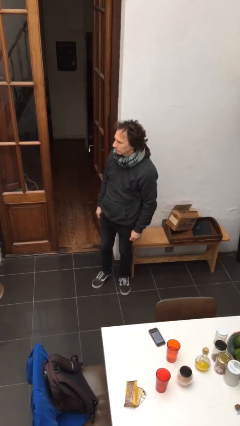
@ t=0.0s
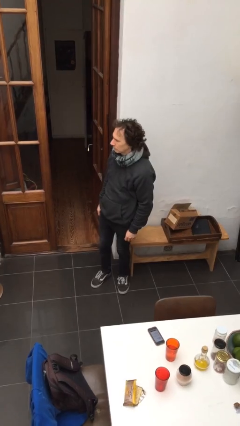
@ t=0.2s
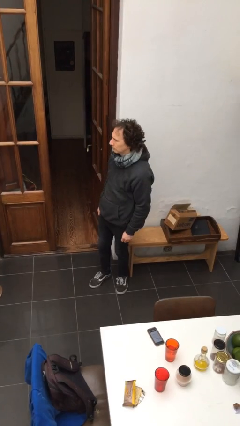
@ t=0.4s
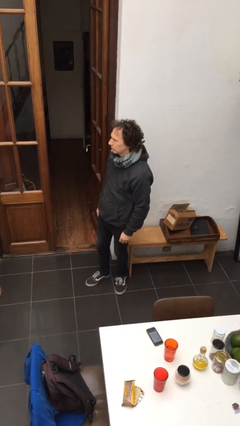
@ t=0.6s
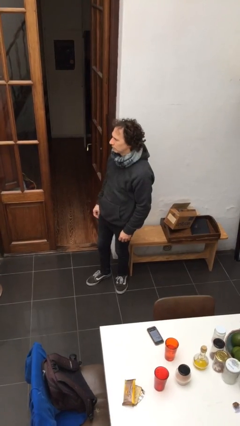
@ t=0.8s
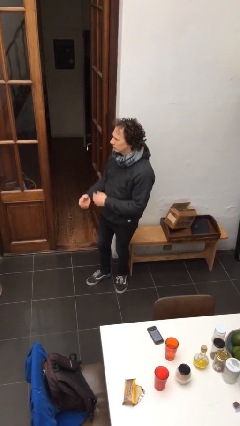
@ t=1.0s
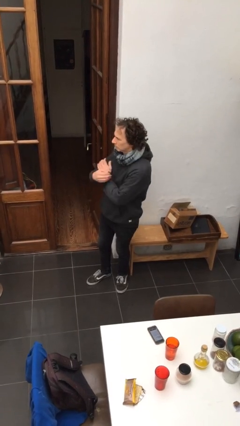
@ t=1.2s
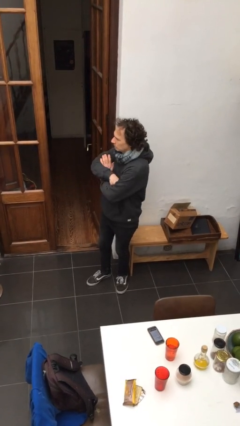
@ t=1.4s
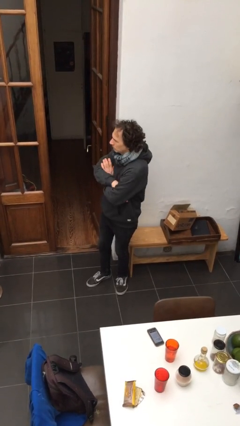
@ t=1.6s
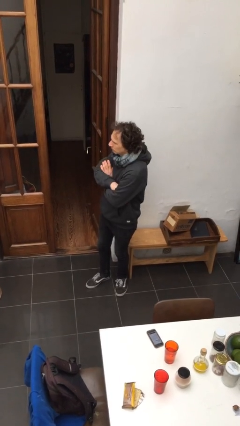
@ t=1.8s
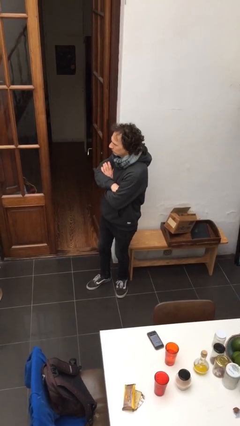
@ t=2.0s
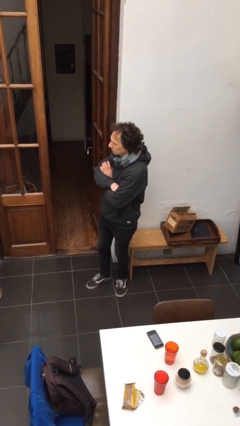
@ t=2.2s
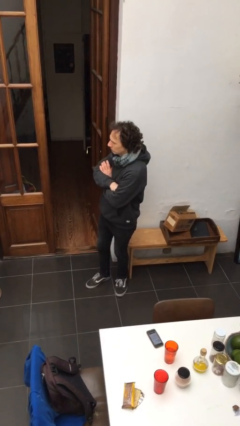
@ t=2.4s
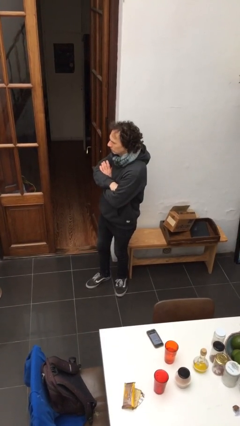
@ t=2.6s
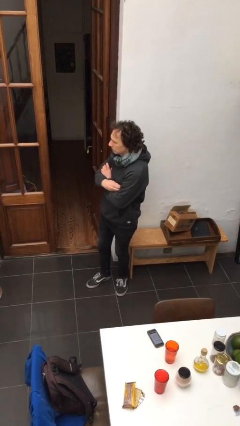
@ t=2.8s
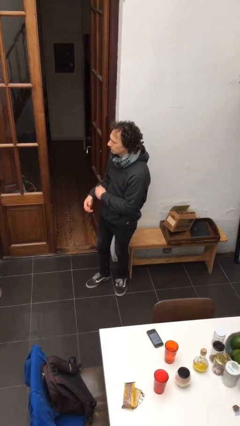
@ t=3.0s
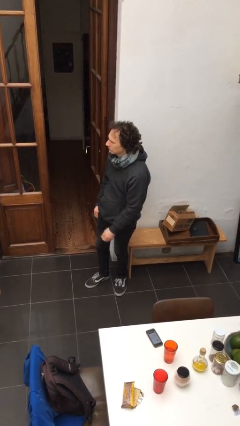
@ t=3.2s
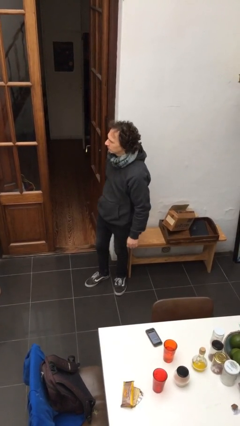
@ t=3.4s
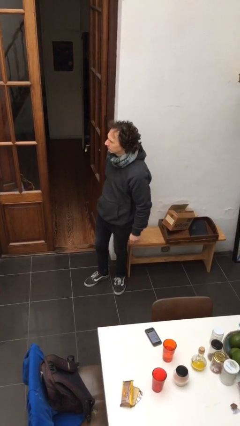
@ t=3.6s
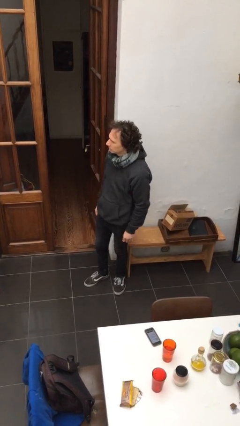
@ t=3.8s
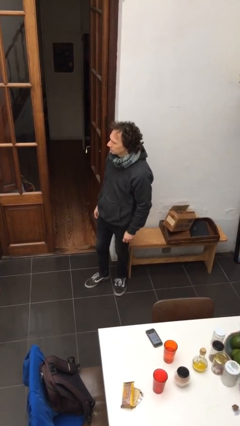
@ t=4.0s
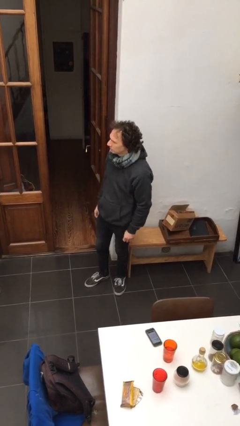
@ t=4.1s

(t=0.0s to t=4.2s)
person crosses arms

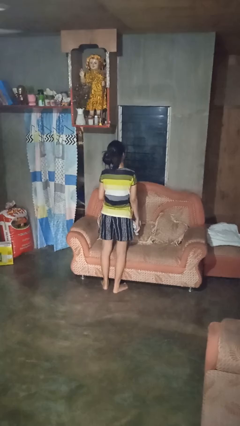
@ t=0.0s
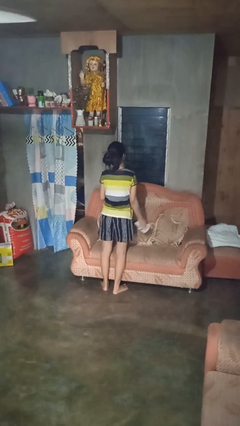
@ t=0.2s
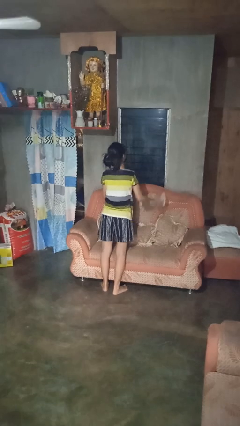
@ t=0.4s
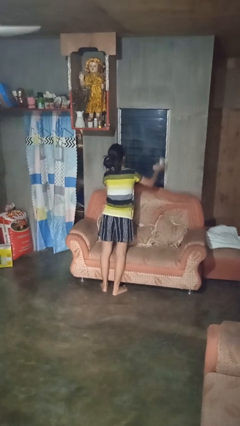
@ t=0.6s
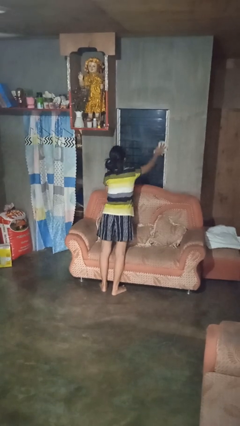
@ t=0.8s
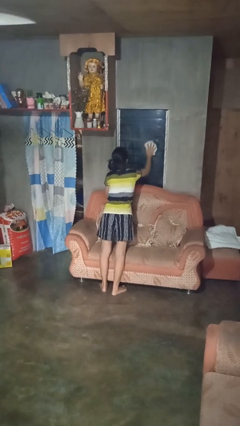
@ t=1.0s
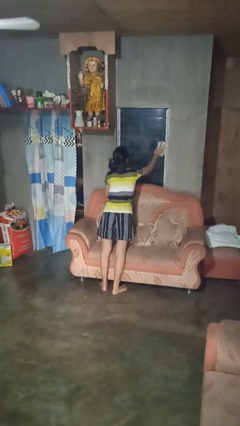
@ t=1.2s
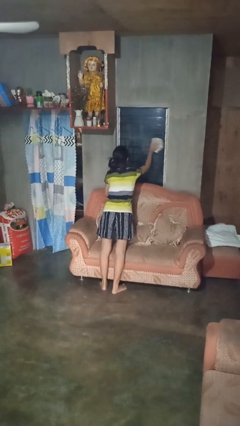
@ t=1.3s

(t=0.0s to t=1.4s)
person washes window

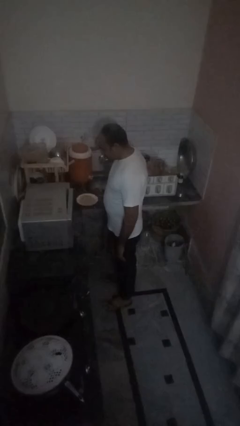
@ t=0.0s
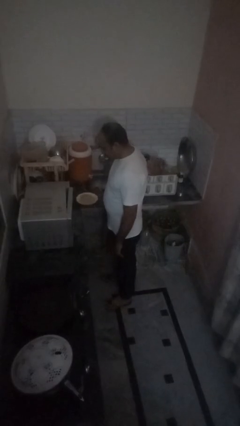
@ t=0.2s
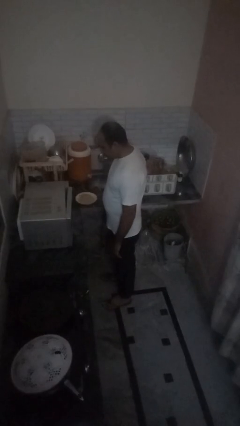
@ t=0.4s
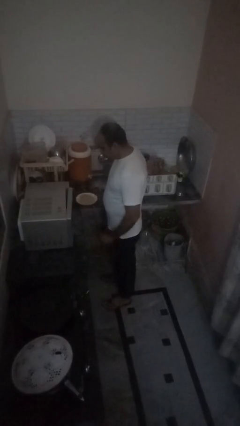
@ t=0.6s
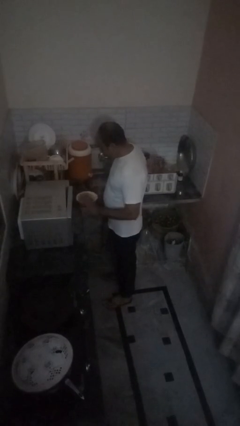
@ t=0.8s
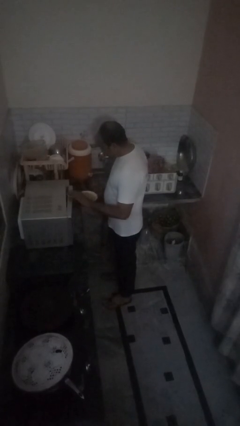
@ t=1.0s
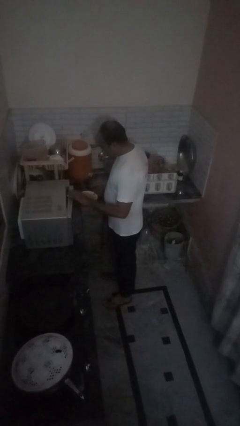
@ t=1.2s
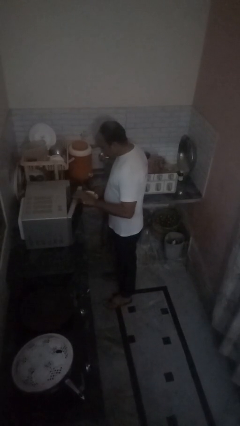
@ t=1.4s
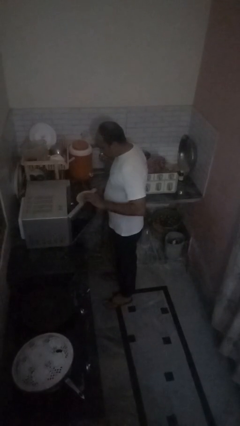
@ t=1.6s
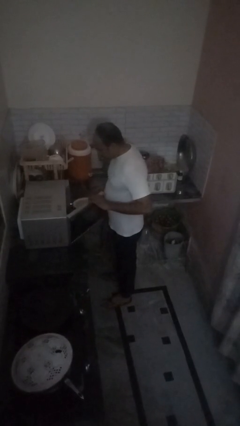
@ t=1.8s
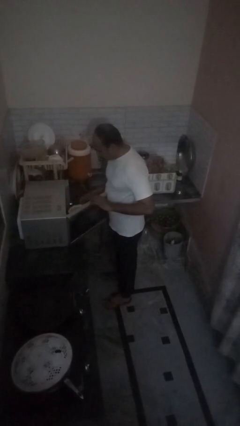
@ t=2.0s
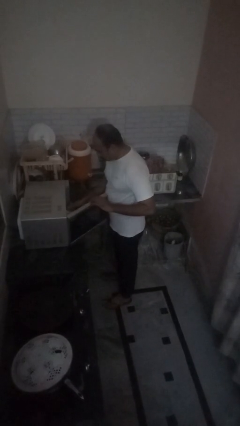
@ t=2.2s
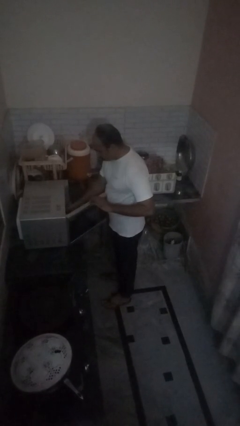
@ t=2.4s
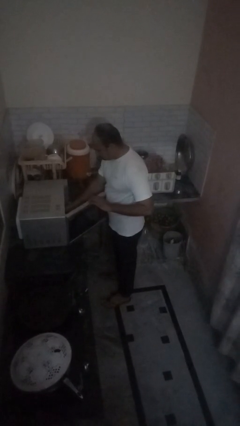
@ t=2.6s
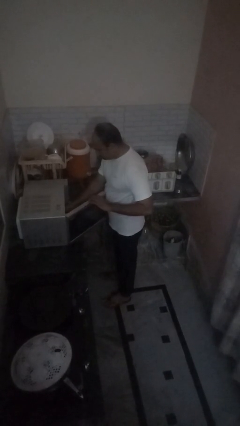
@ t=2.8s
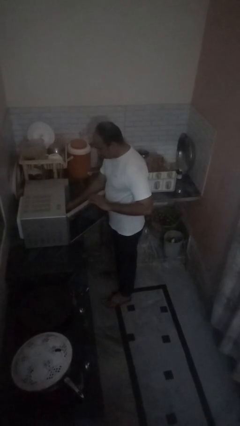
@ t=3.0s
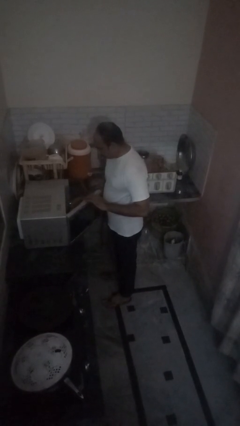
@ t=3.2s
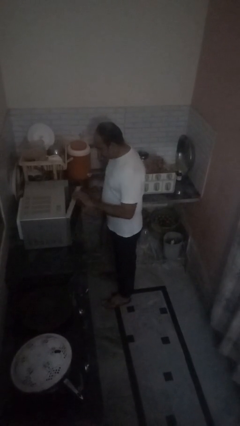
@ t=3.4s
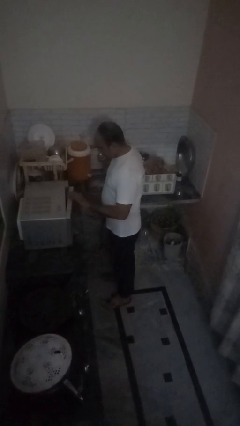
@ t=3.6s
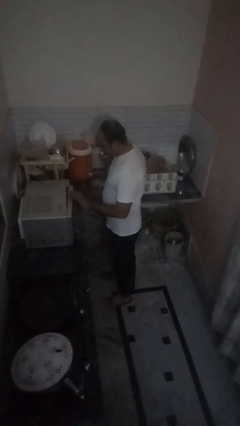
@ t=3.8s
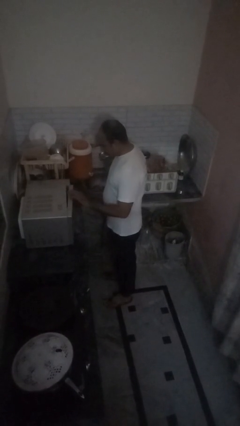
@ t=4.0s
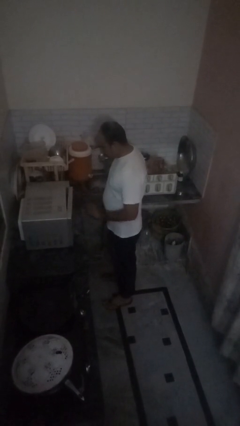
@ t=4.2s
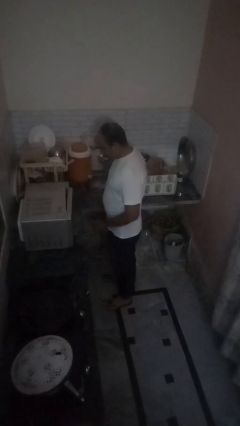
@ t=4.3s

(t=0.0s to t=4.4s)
person puts object into oven

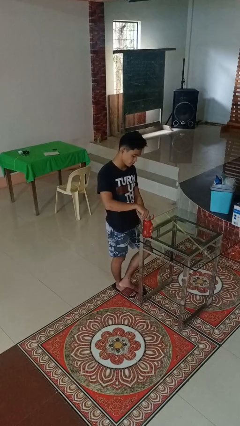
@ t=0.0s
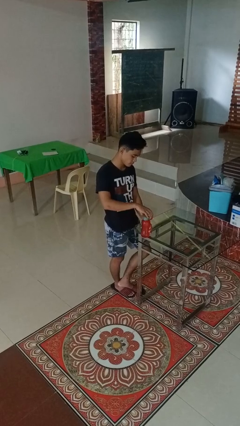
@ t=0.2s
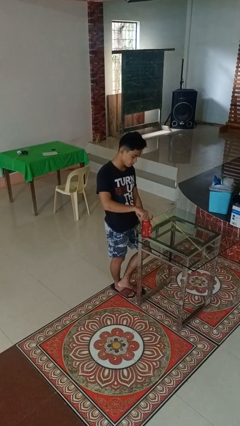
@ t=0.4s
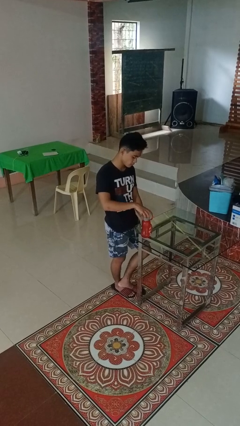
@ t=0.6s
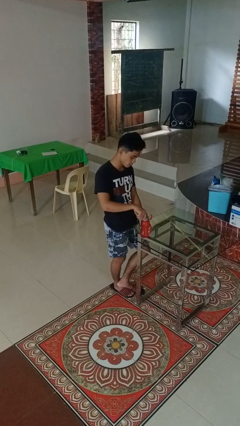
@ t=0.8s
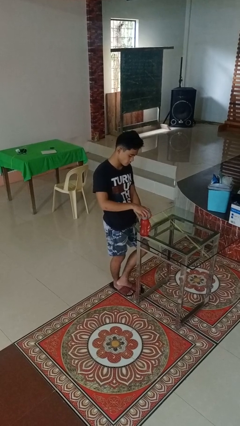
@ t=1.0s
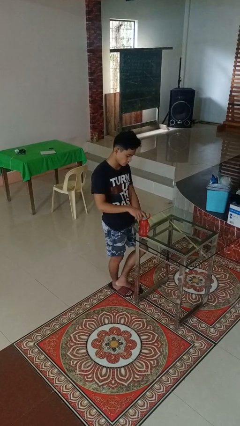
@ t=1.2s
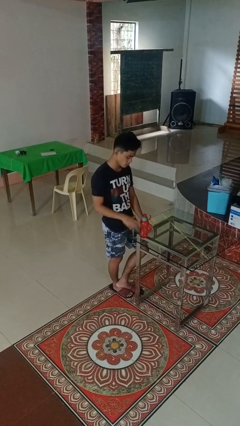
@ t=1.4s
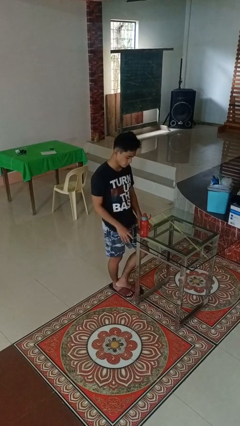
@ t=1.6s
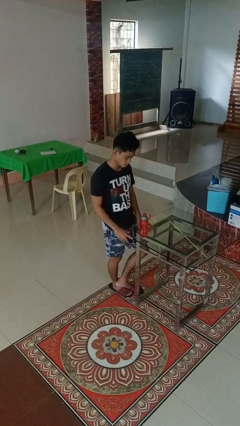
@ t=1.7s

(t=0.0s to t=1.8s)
person screws lid to bottle

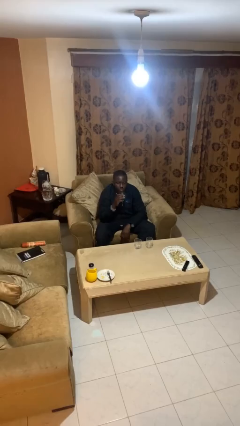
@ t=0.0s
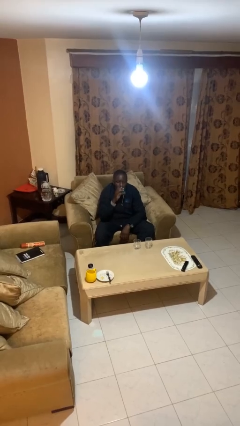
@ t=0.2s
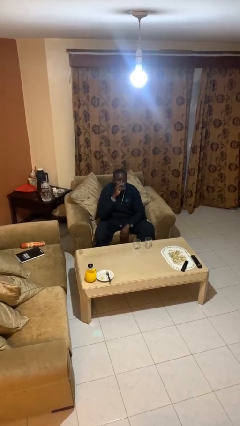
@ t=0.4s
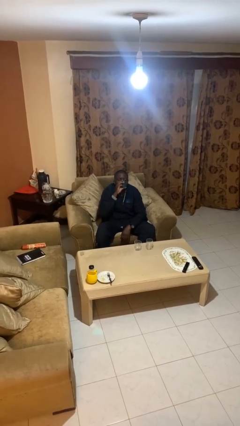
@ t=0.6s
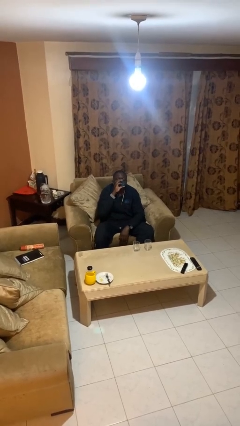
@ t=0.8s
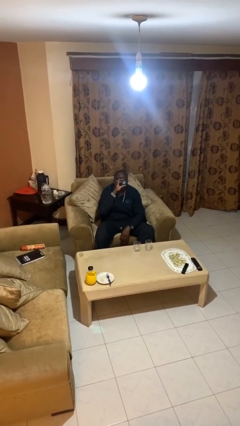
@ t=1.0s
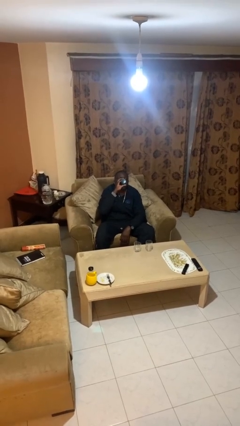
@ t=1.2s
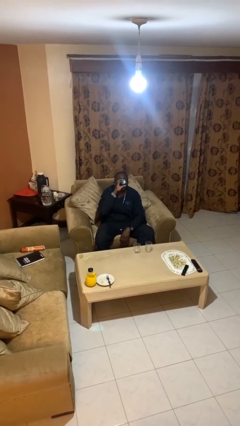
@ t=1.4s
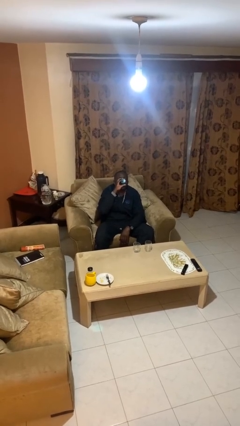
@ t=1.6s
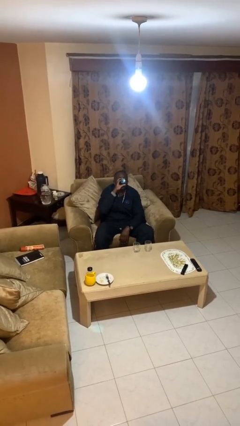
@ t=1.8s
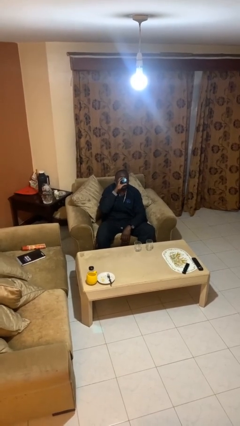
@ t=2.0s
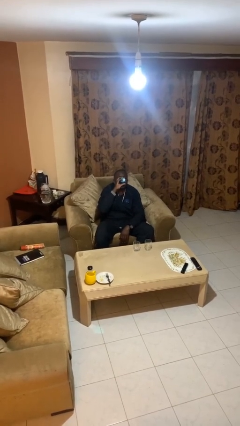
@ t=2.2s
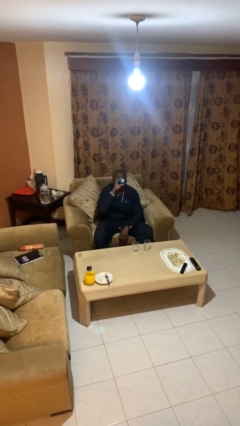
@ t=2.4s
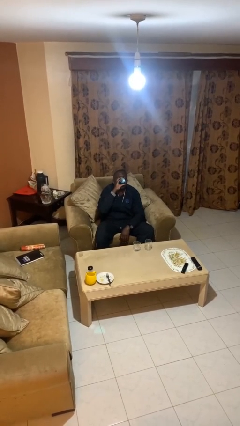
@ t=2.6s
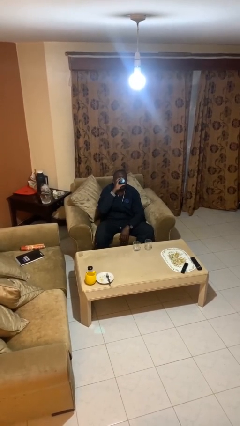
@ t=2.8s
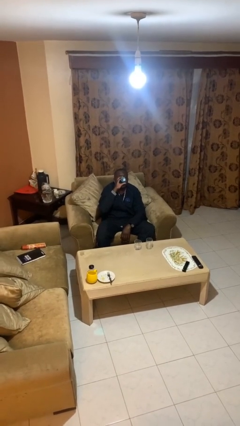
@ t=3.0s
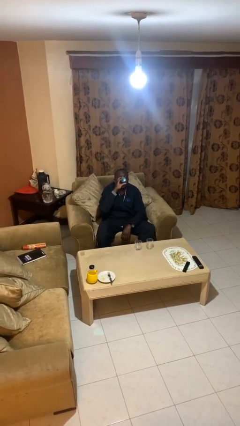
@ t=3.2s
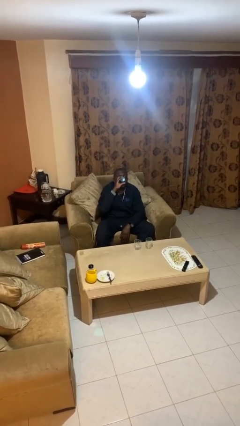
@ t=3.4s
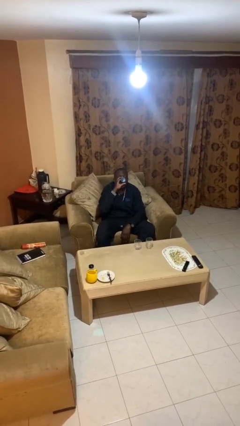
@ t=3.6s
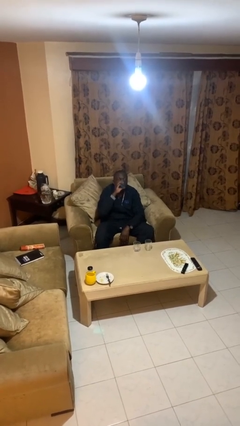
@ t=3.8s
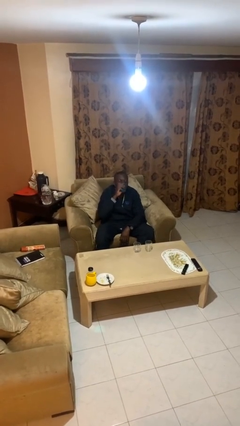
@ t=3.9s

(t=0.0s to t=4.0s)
person drinks from shotglass

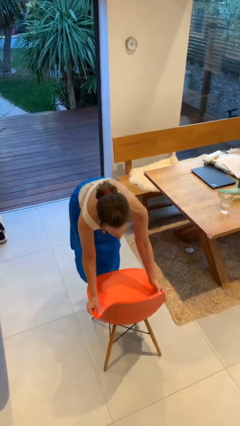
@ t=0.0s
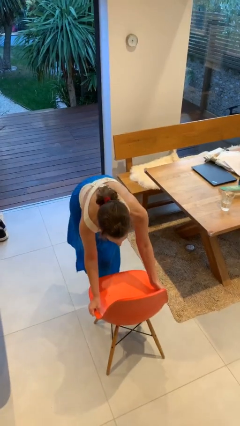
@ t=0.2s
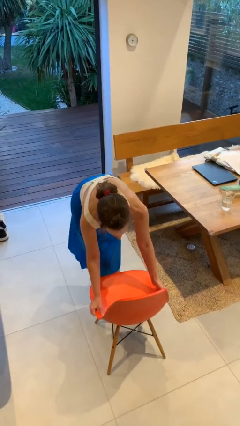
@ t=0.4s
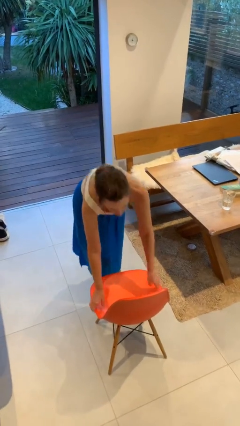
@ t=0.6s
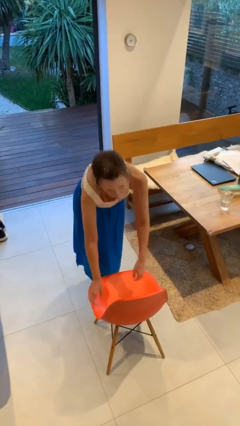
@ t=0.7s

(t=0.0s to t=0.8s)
person puts down object on floor

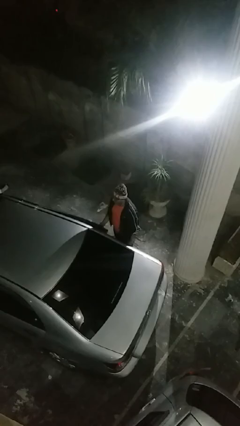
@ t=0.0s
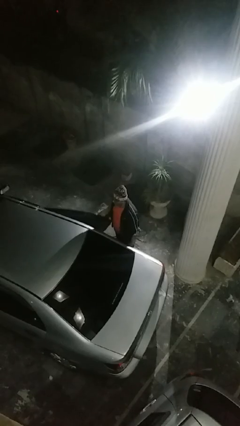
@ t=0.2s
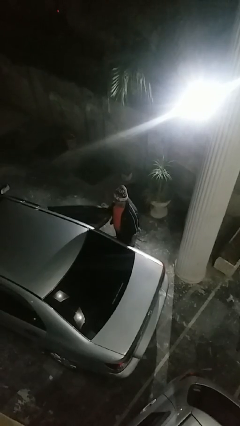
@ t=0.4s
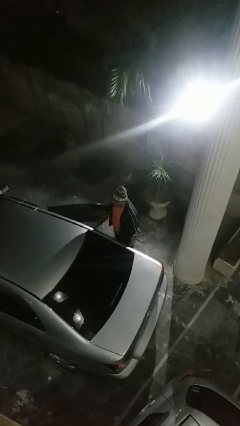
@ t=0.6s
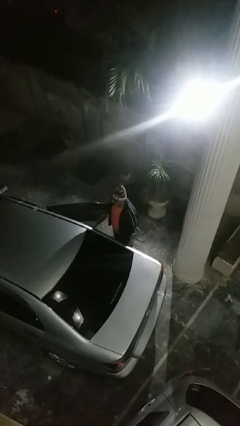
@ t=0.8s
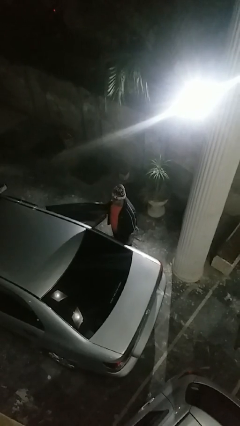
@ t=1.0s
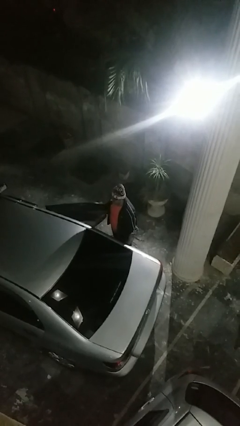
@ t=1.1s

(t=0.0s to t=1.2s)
person opens car door
